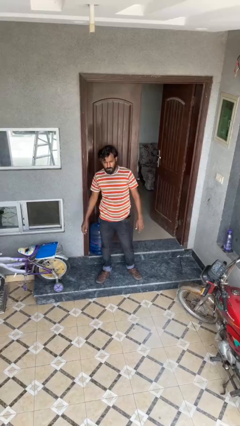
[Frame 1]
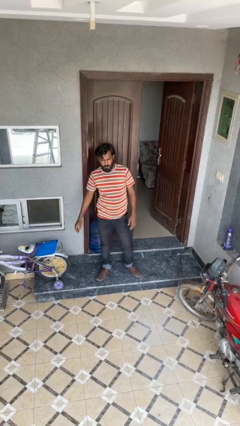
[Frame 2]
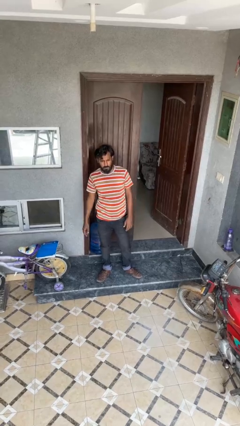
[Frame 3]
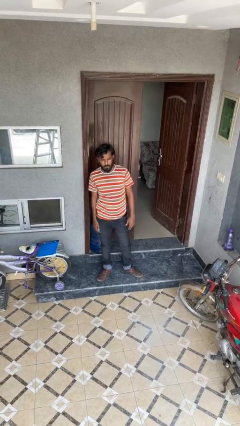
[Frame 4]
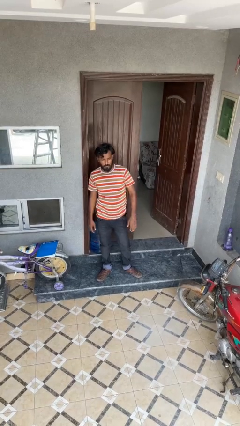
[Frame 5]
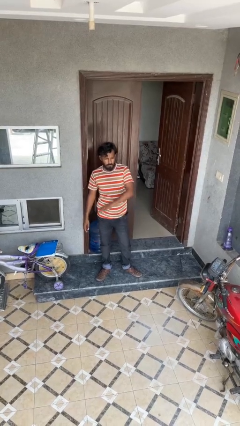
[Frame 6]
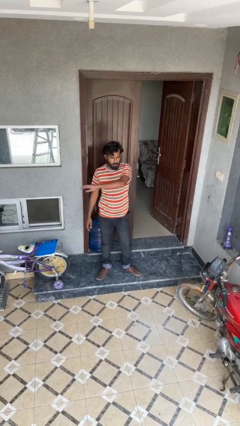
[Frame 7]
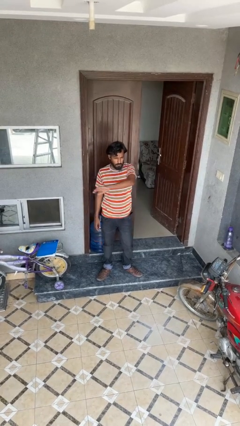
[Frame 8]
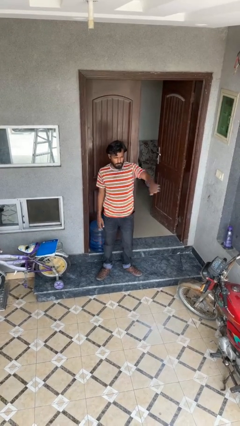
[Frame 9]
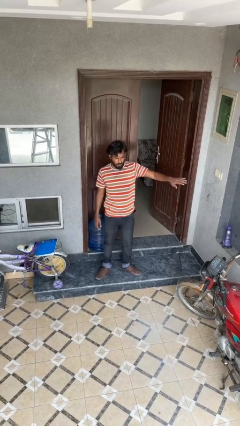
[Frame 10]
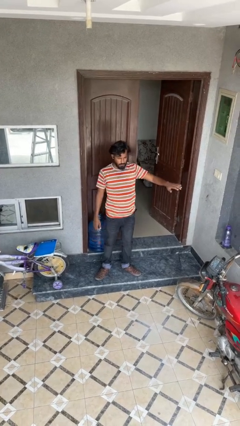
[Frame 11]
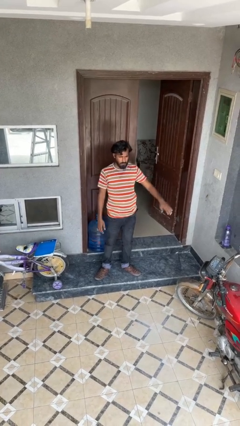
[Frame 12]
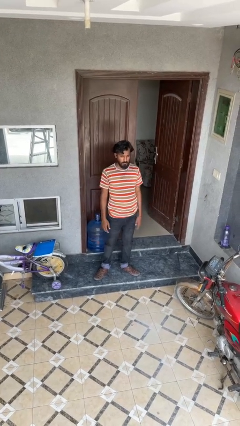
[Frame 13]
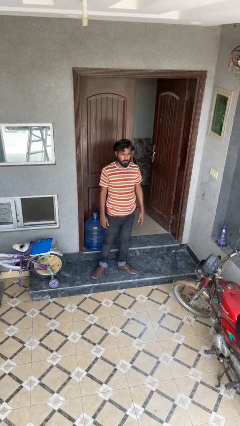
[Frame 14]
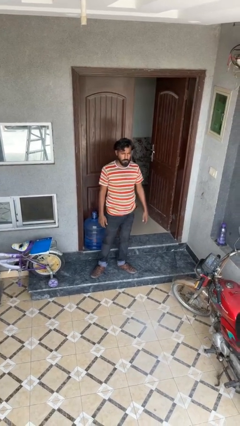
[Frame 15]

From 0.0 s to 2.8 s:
person gestures swipe left

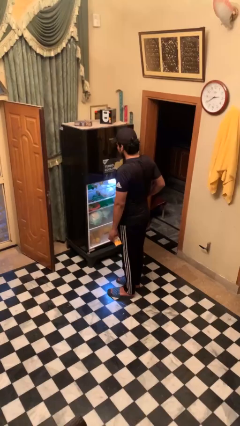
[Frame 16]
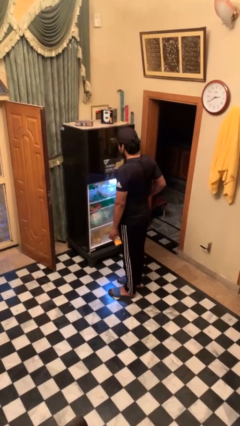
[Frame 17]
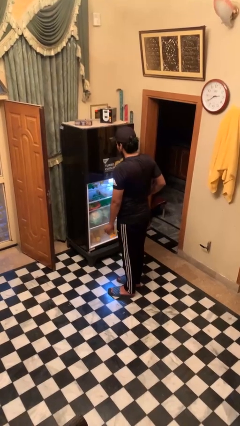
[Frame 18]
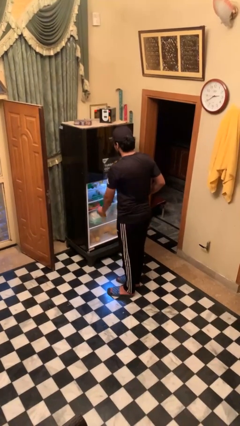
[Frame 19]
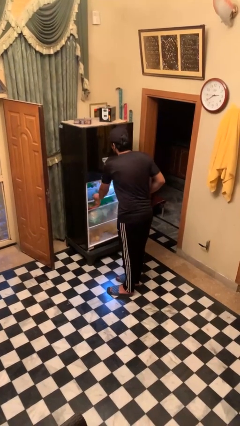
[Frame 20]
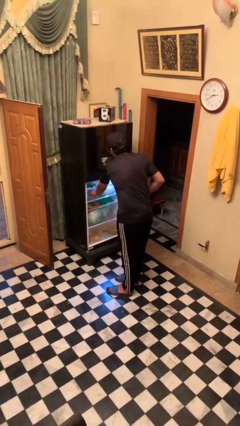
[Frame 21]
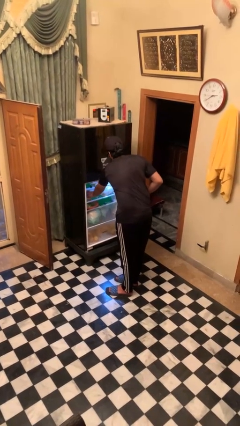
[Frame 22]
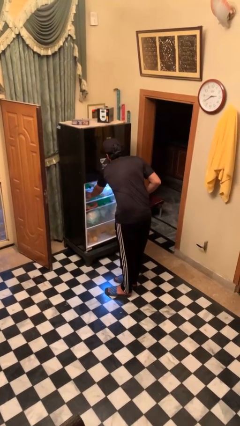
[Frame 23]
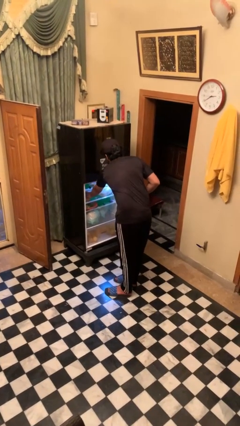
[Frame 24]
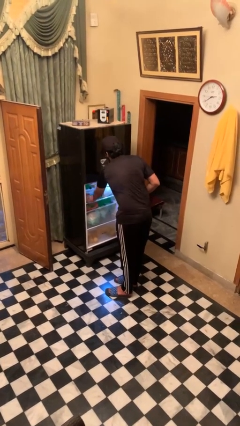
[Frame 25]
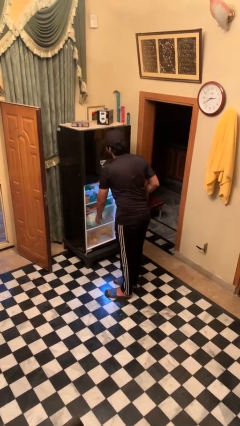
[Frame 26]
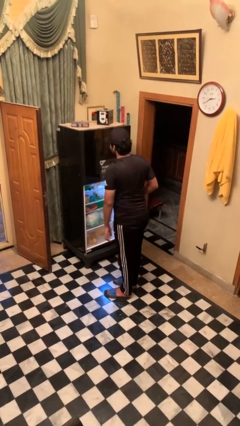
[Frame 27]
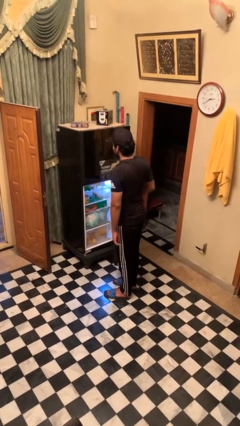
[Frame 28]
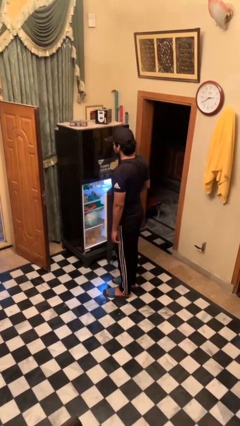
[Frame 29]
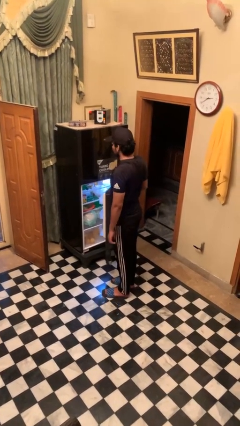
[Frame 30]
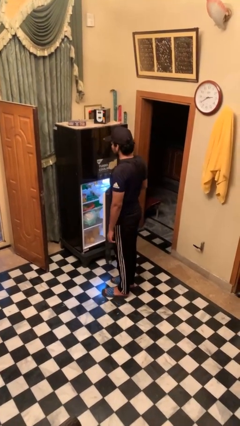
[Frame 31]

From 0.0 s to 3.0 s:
person puts object into refrigerator

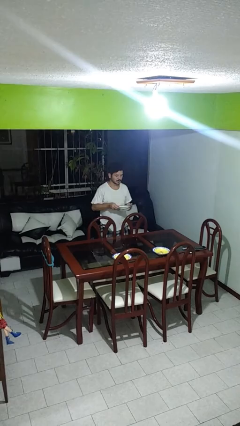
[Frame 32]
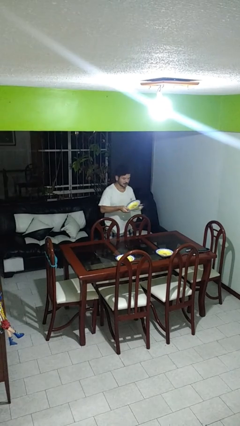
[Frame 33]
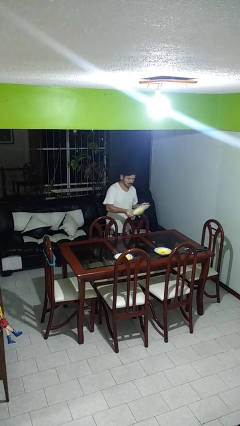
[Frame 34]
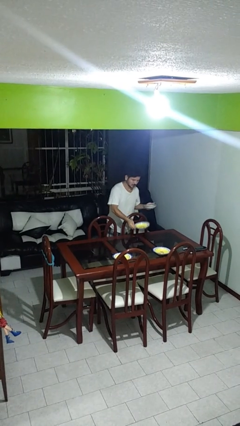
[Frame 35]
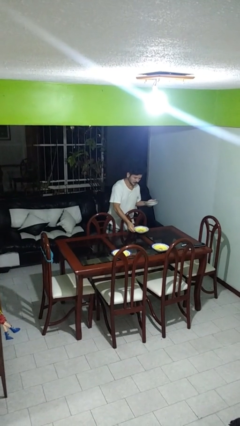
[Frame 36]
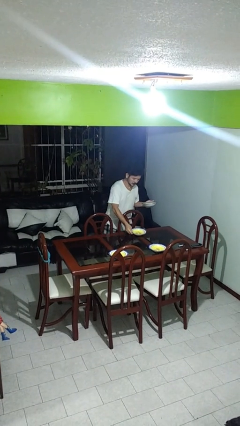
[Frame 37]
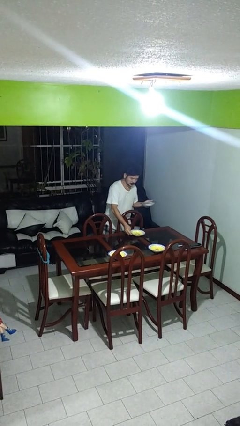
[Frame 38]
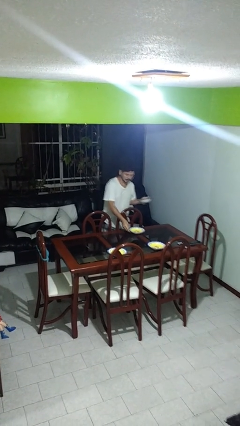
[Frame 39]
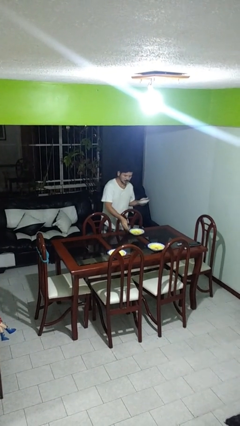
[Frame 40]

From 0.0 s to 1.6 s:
person sets table

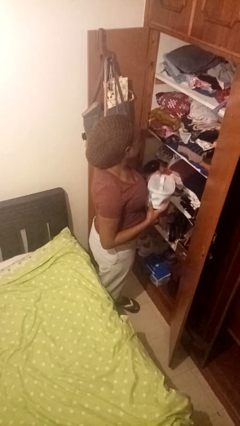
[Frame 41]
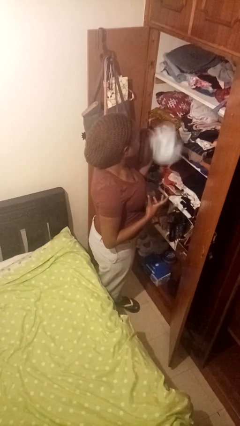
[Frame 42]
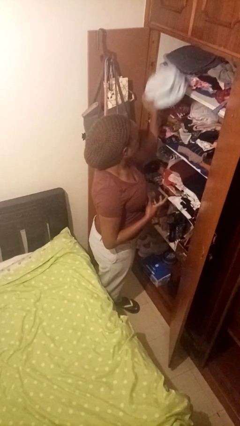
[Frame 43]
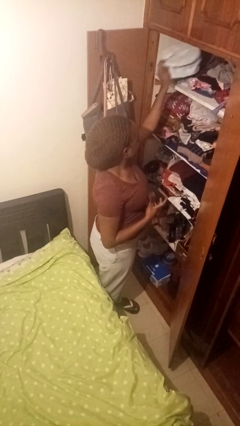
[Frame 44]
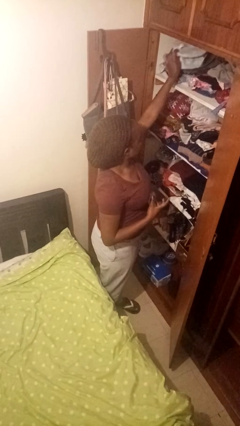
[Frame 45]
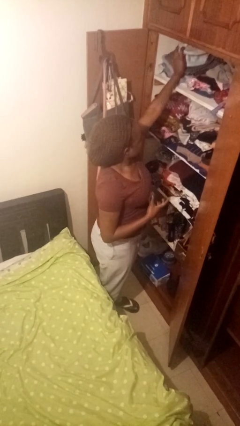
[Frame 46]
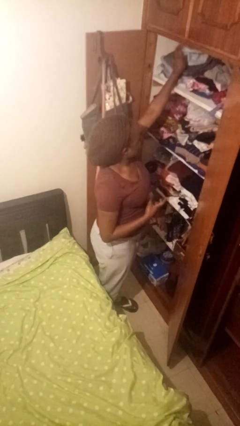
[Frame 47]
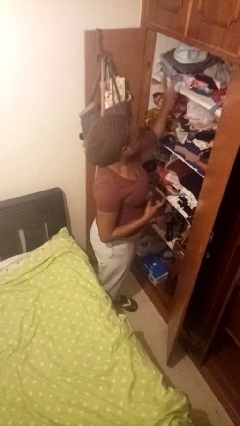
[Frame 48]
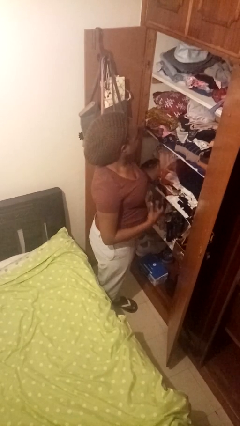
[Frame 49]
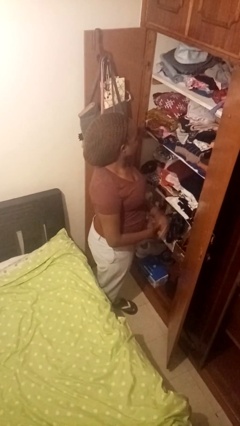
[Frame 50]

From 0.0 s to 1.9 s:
person puts down object on shelf

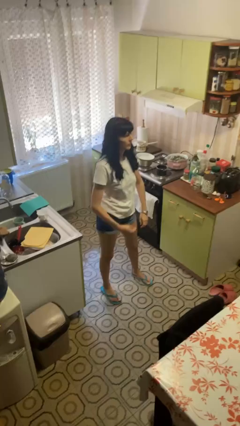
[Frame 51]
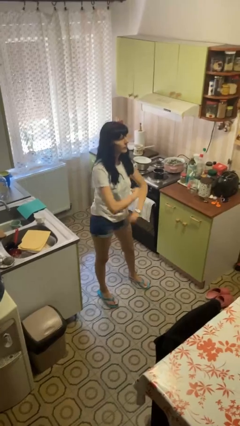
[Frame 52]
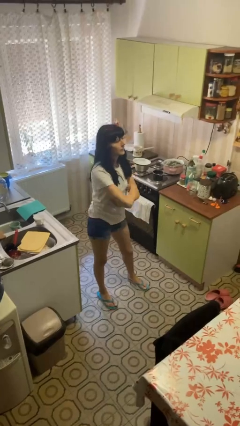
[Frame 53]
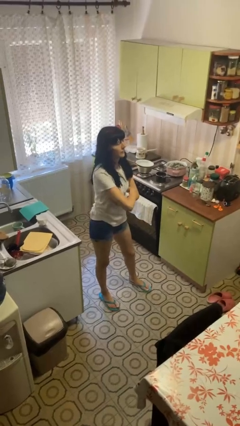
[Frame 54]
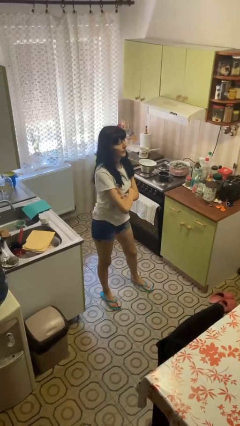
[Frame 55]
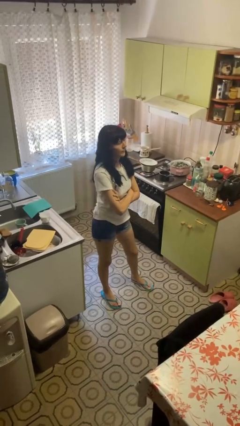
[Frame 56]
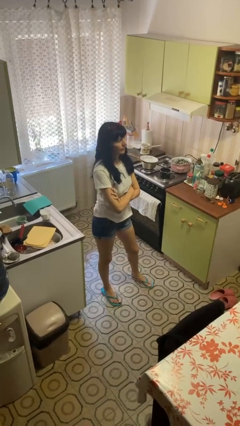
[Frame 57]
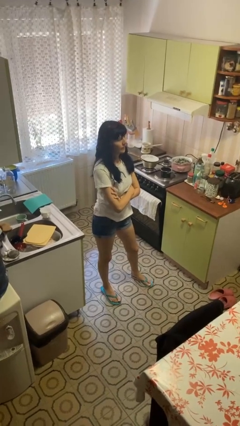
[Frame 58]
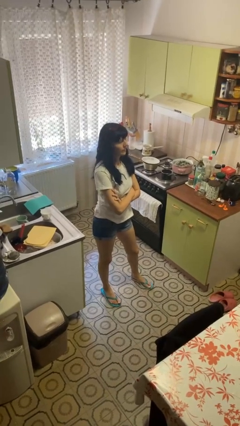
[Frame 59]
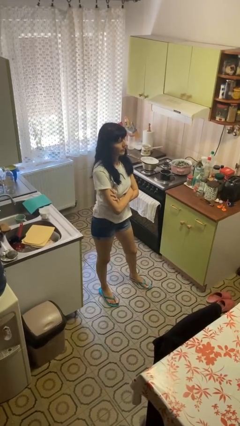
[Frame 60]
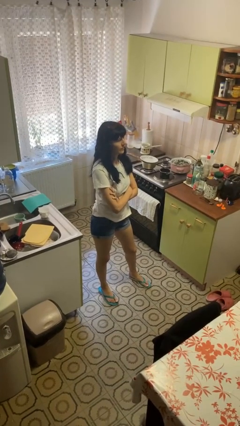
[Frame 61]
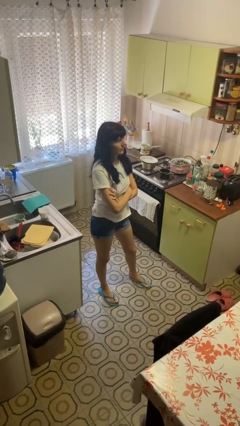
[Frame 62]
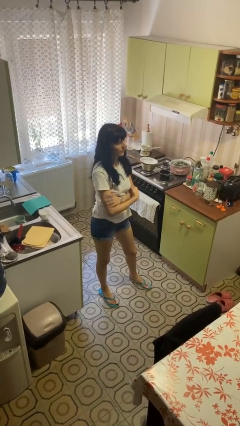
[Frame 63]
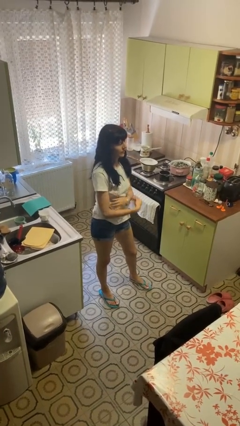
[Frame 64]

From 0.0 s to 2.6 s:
person crosses arms

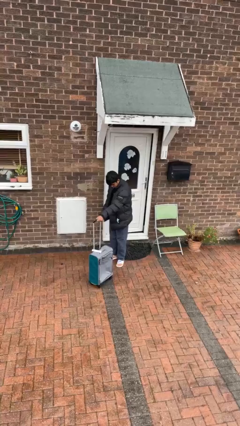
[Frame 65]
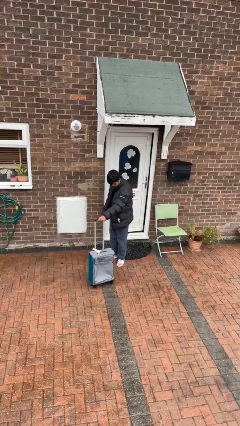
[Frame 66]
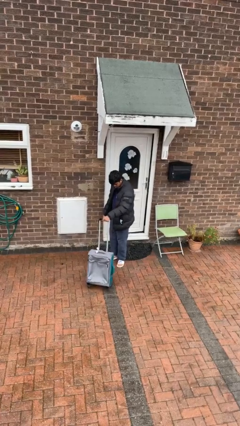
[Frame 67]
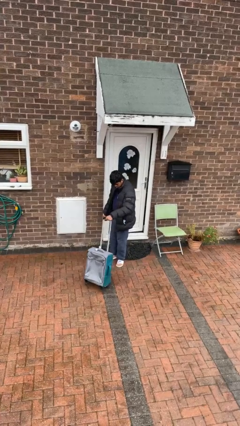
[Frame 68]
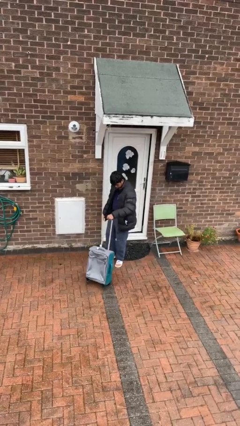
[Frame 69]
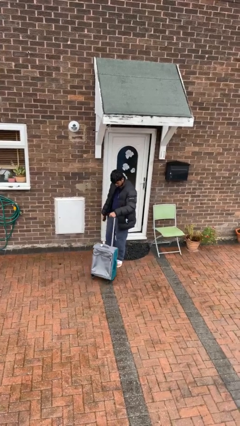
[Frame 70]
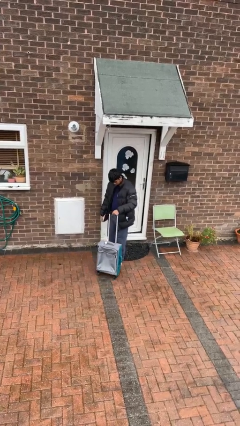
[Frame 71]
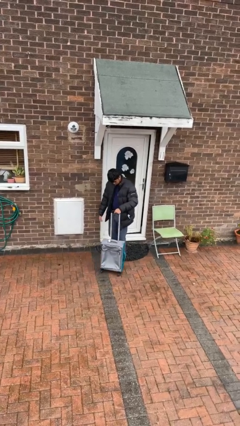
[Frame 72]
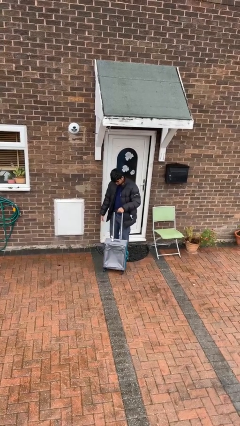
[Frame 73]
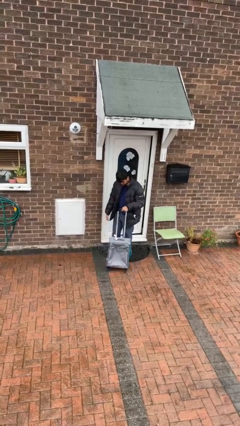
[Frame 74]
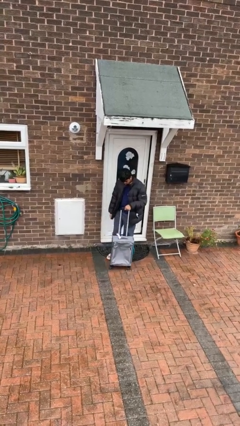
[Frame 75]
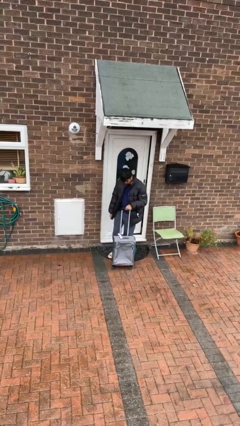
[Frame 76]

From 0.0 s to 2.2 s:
person pulls wheeled cart

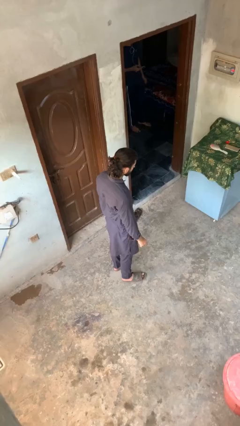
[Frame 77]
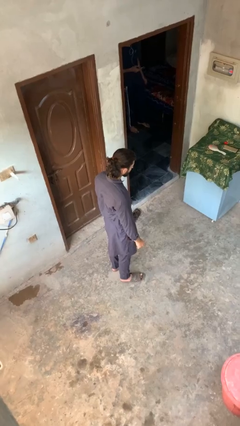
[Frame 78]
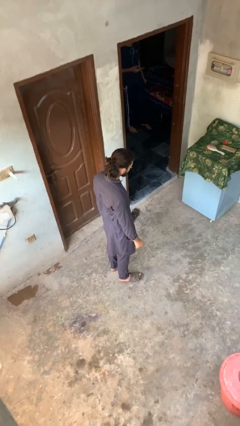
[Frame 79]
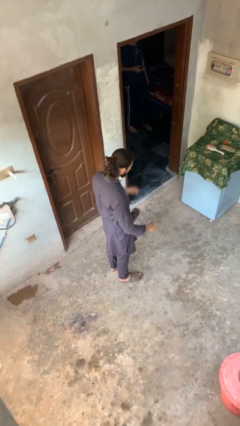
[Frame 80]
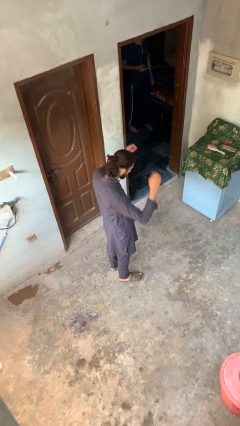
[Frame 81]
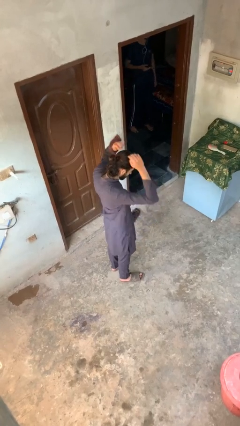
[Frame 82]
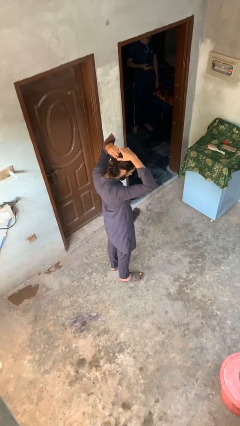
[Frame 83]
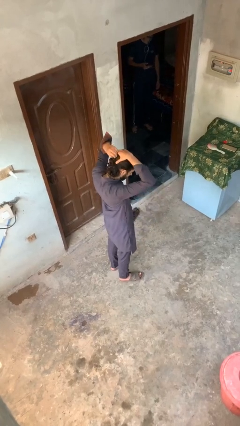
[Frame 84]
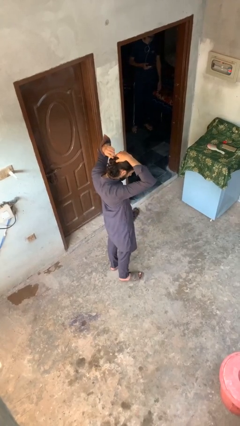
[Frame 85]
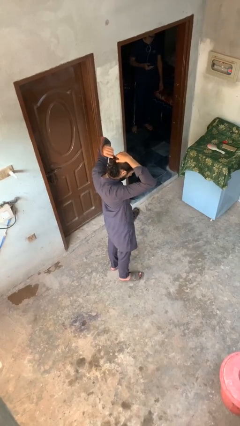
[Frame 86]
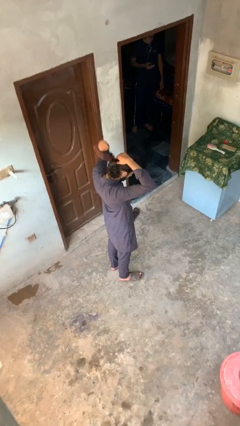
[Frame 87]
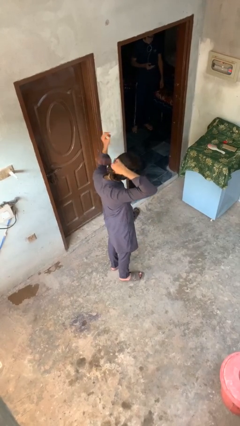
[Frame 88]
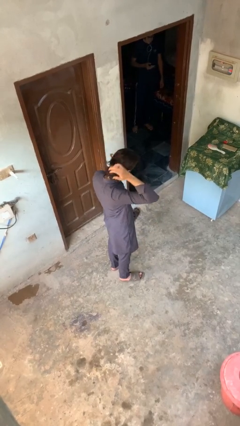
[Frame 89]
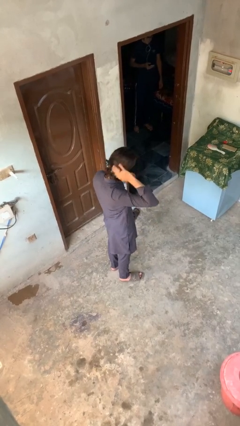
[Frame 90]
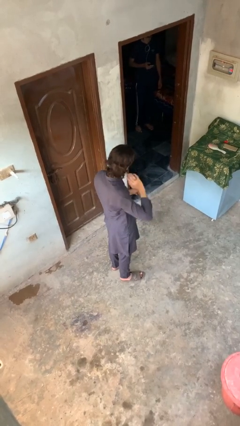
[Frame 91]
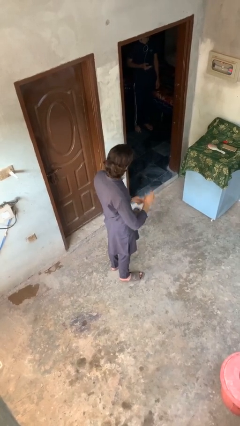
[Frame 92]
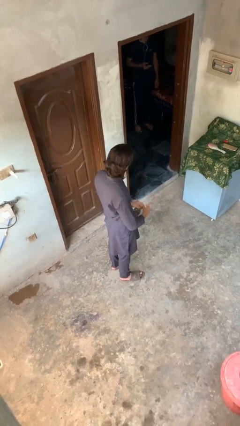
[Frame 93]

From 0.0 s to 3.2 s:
person takes off hairtie

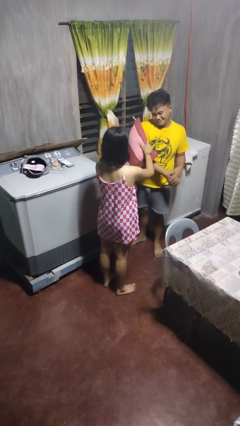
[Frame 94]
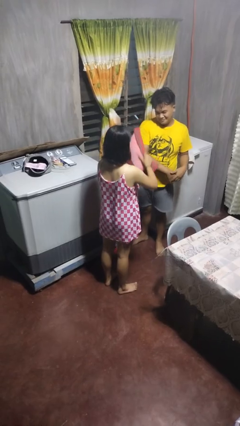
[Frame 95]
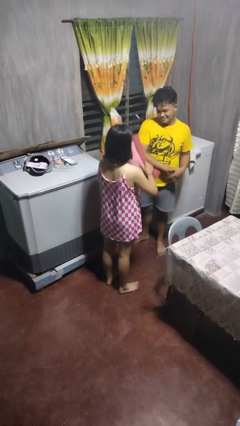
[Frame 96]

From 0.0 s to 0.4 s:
person hits person with pillow
